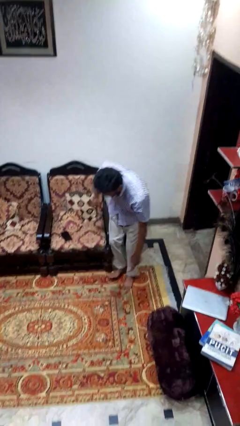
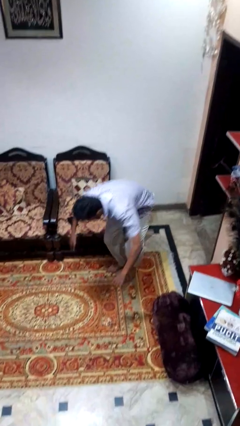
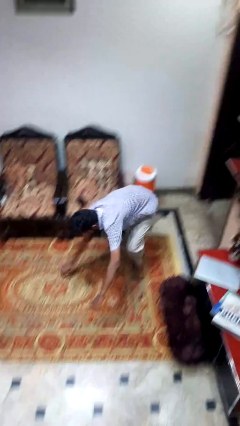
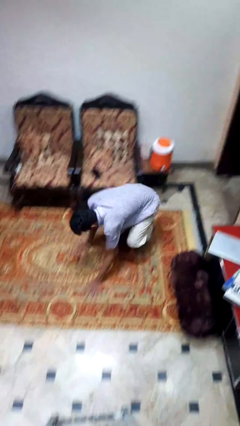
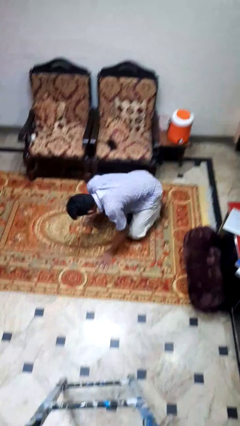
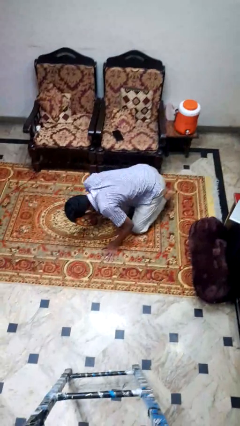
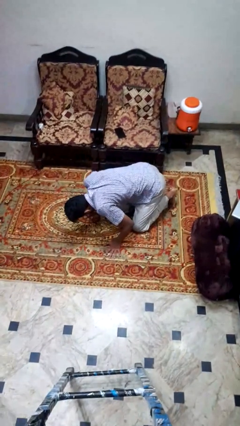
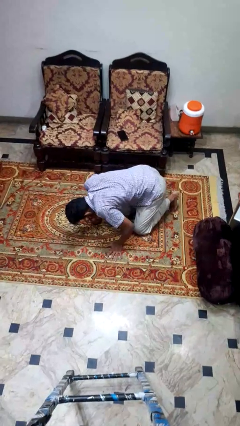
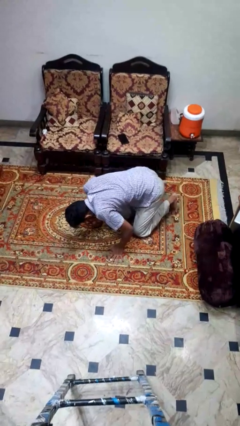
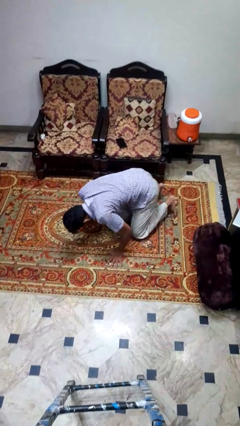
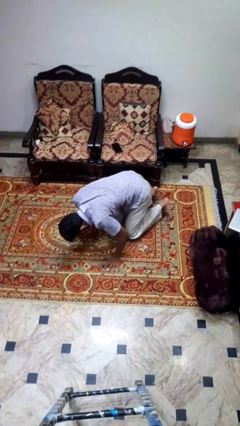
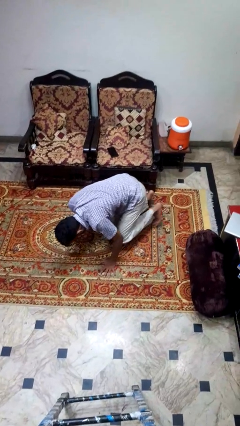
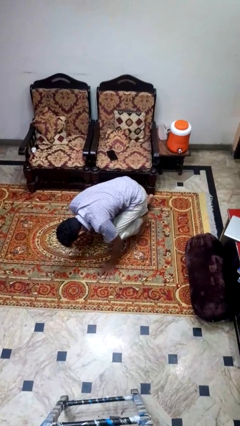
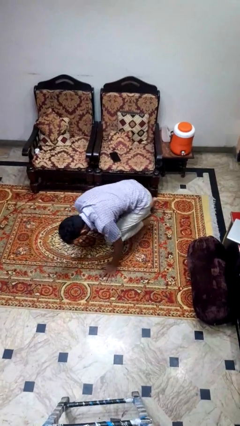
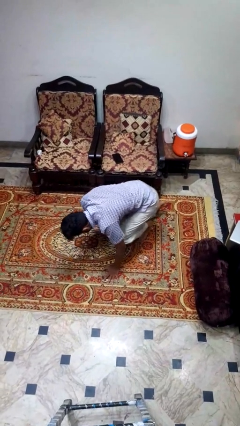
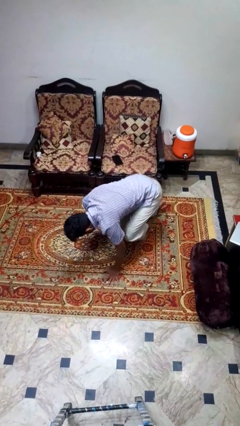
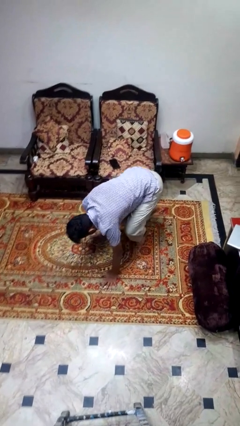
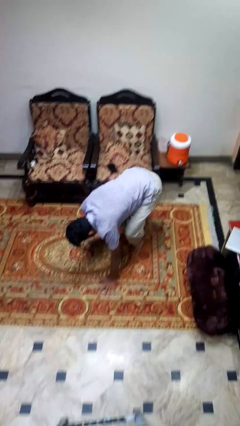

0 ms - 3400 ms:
person trips on object on floor

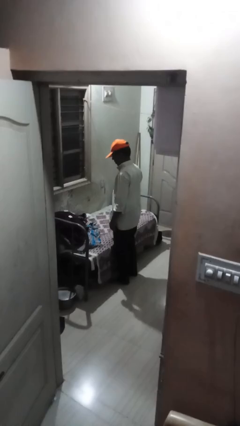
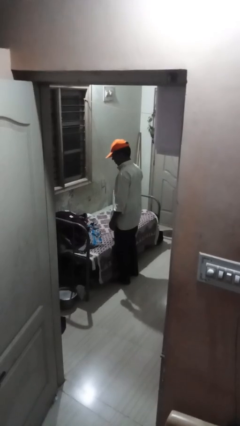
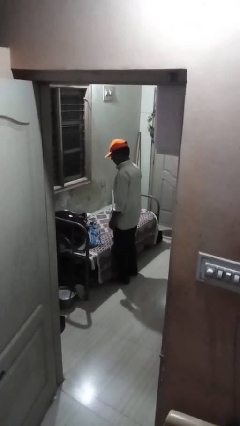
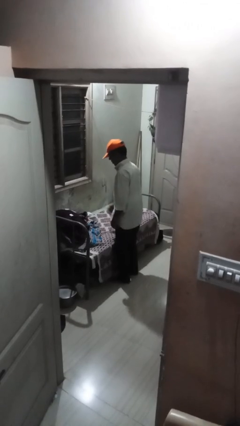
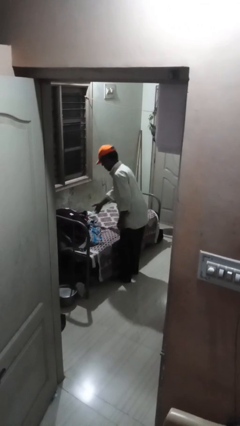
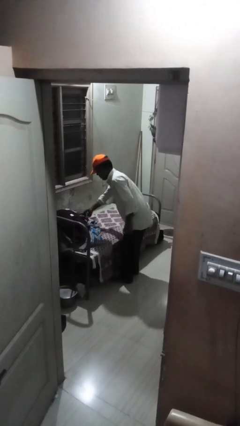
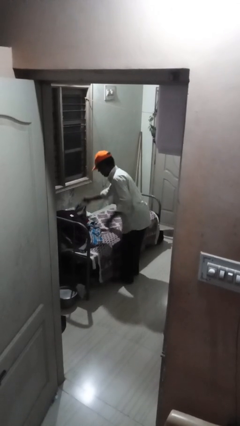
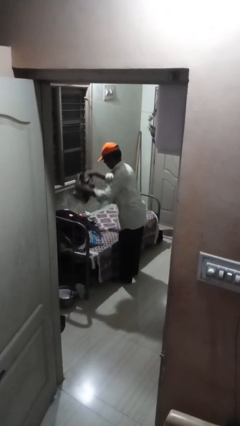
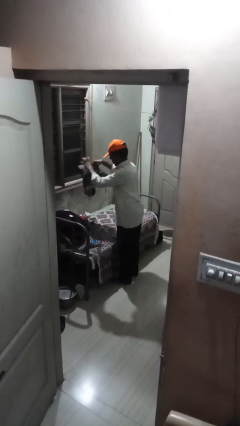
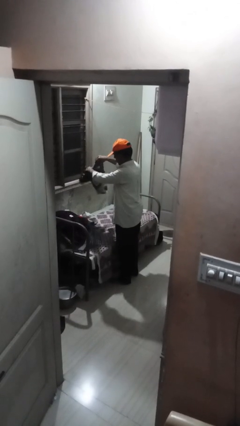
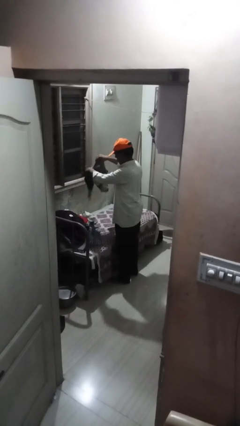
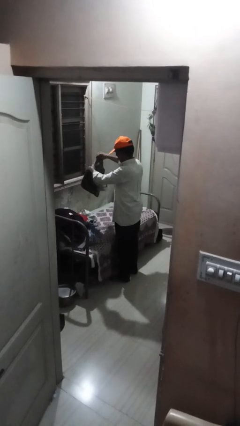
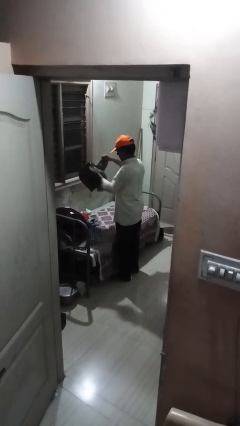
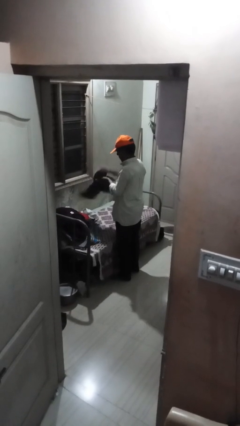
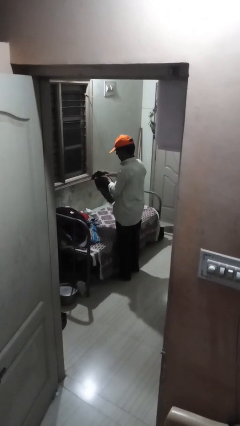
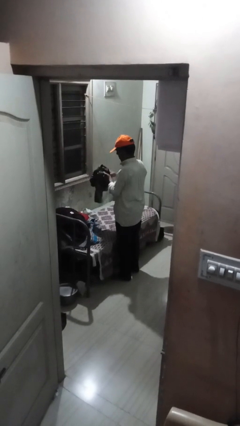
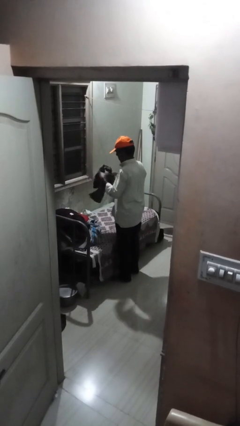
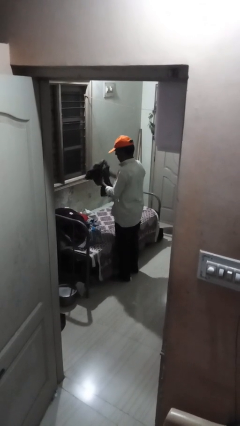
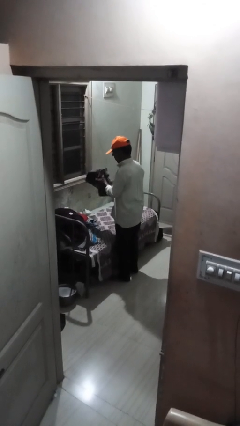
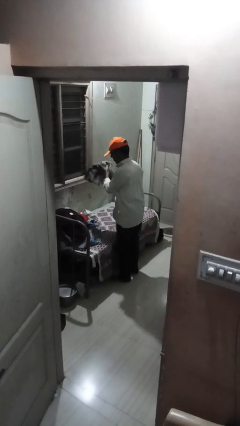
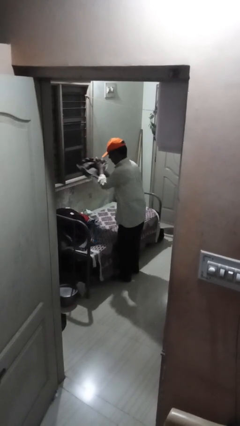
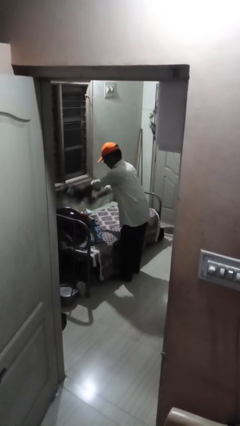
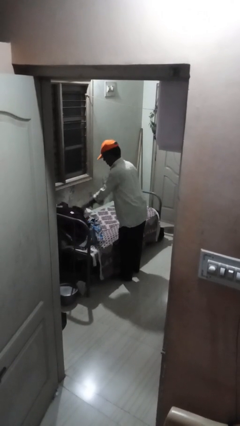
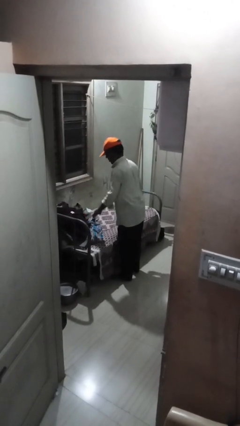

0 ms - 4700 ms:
person folds pants

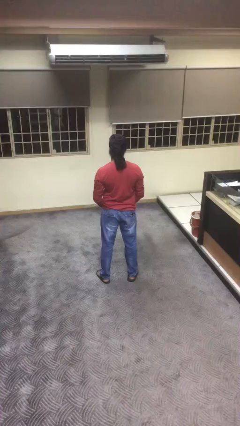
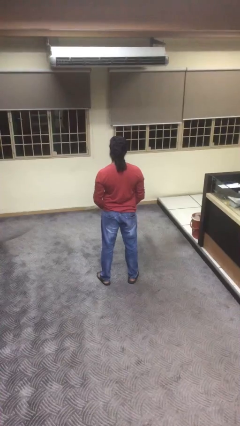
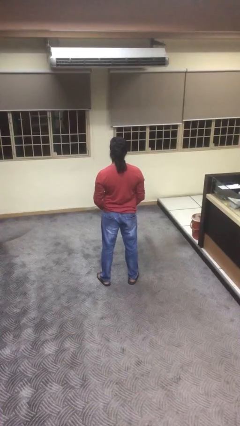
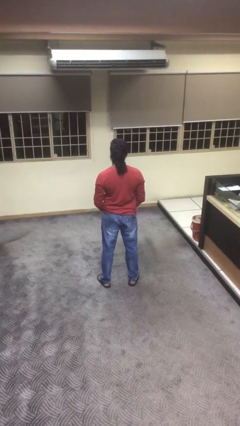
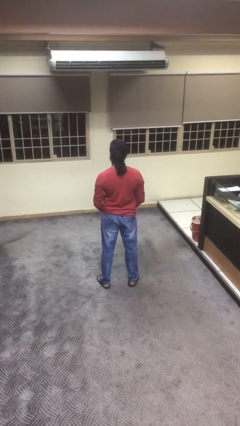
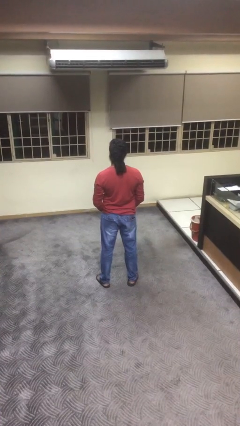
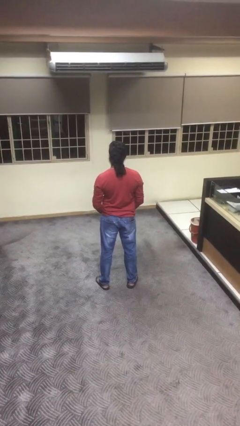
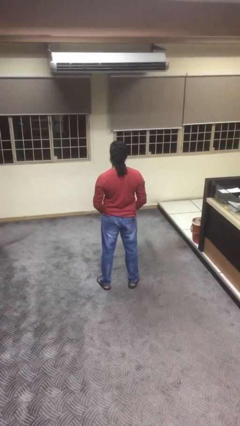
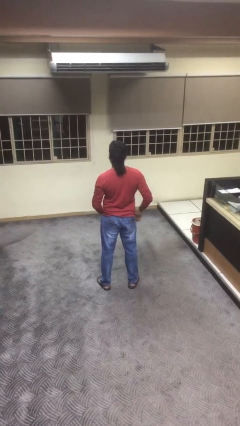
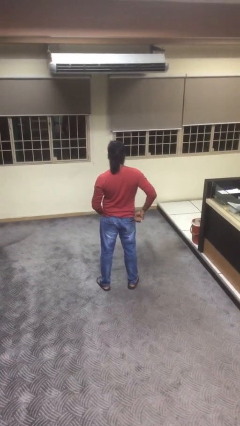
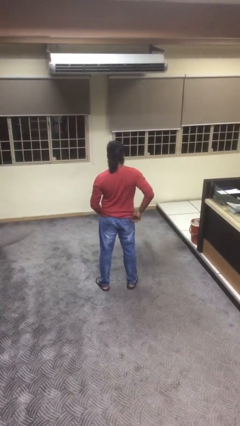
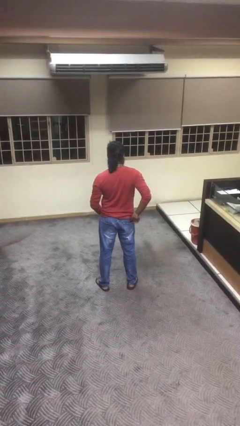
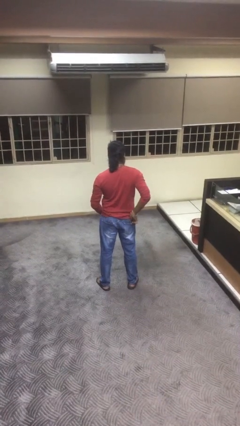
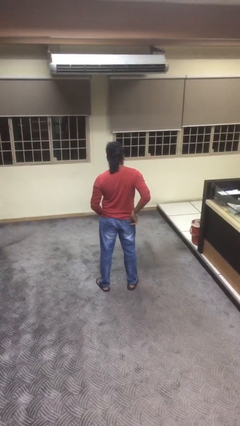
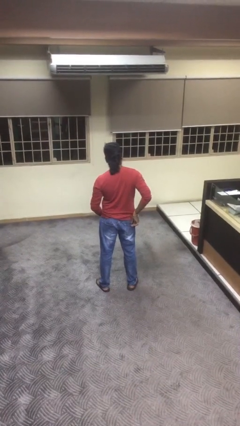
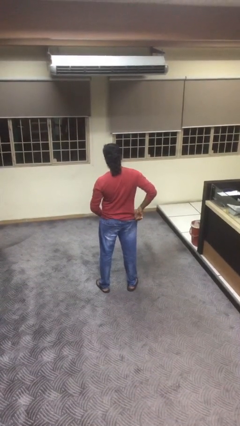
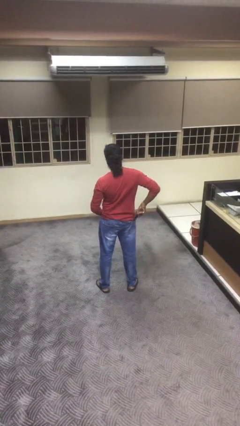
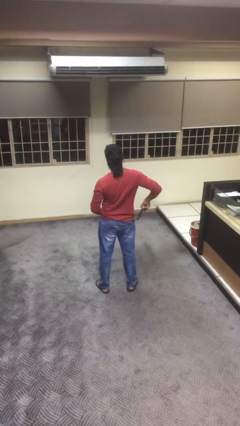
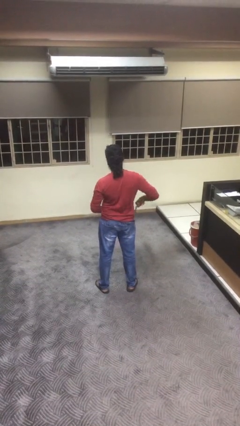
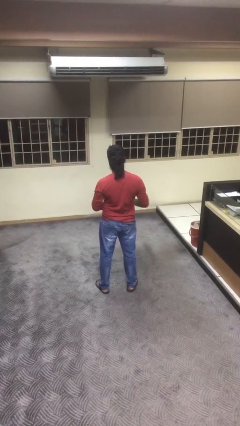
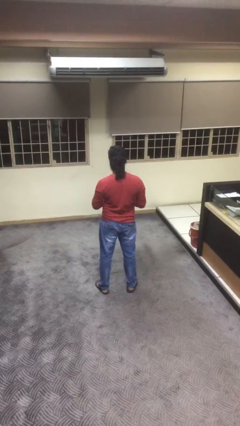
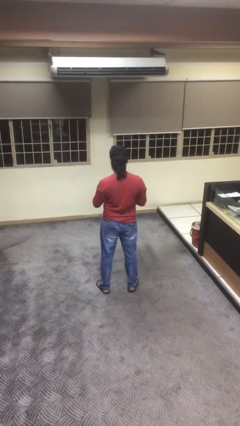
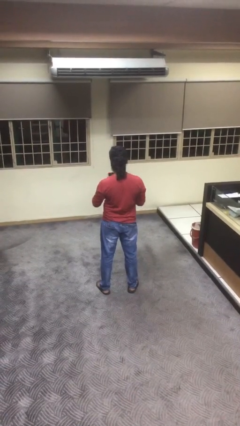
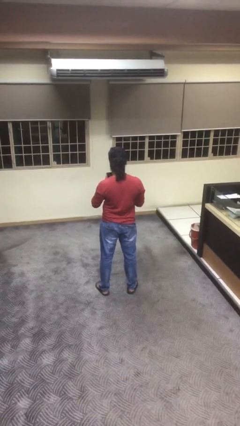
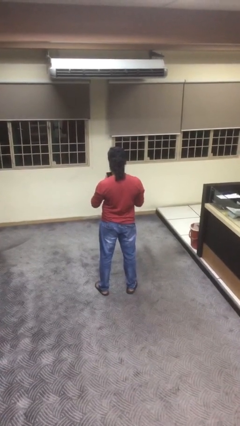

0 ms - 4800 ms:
person takes phone from pocket

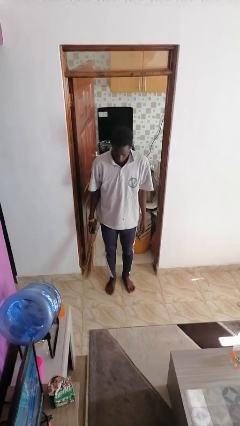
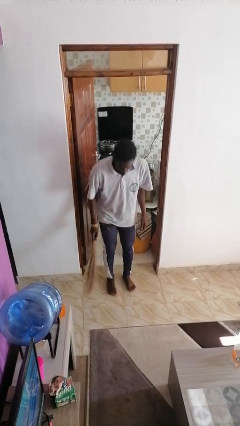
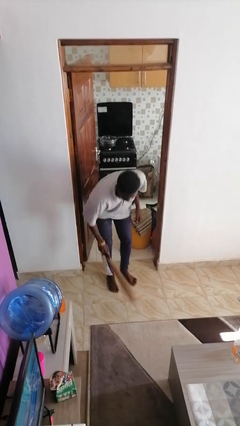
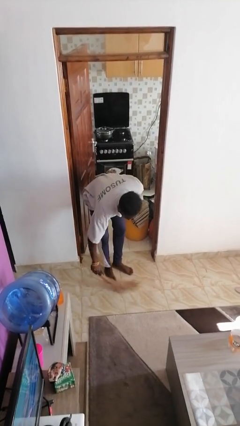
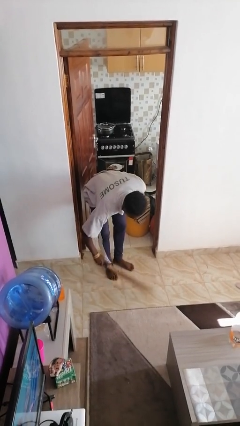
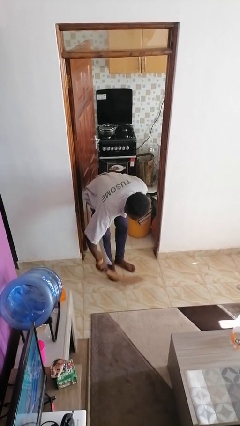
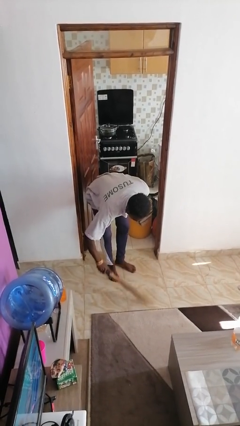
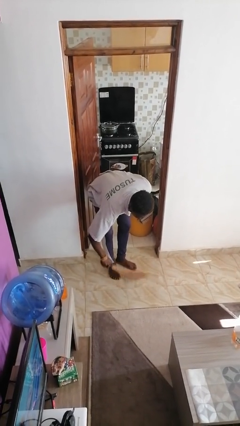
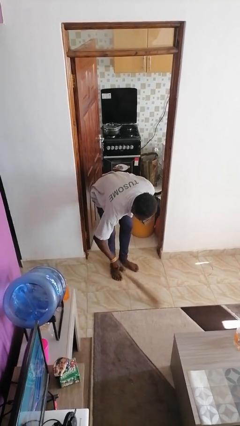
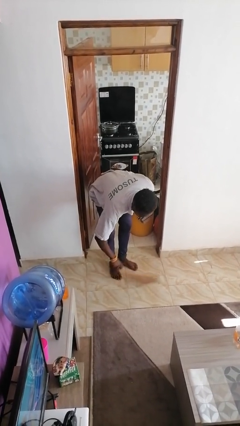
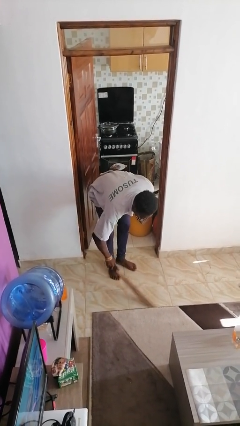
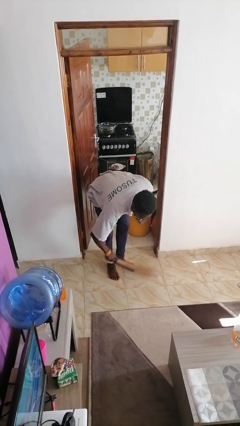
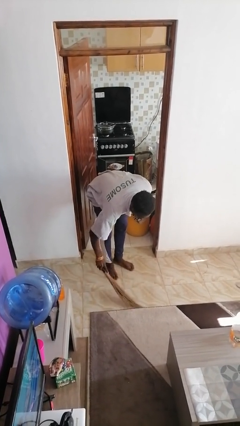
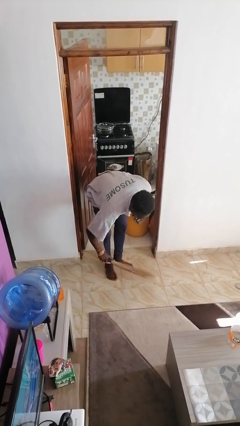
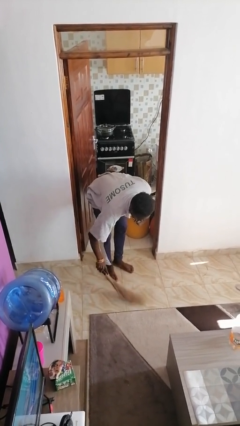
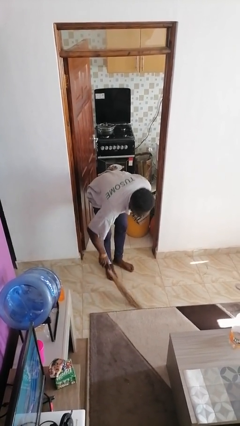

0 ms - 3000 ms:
person sweeps floor

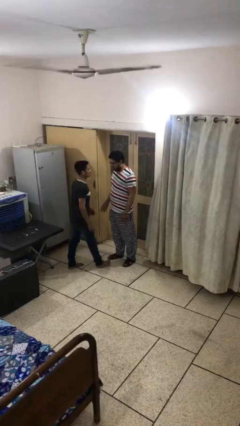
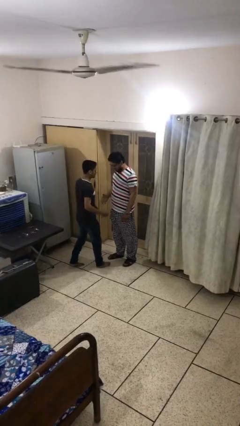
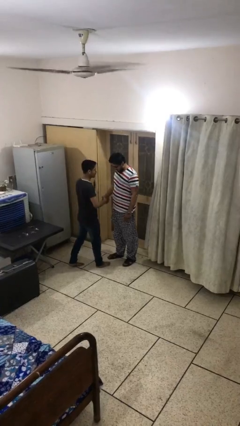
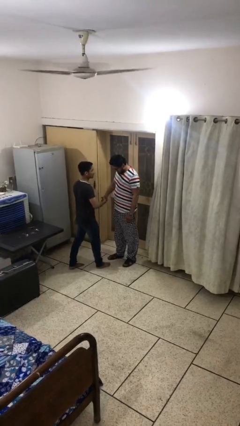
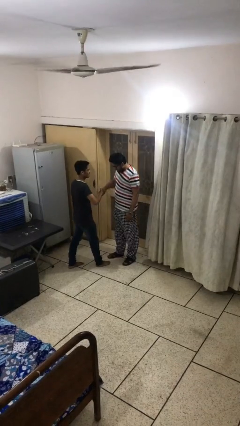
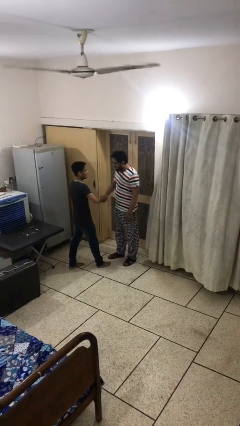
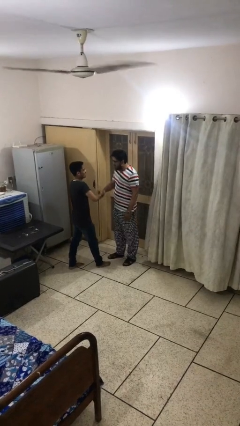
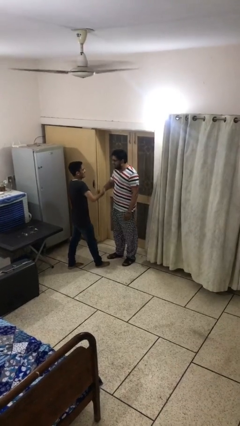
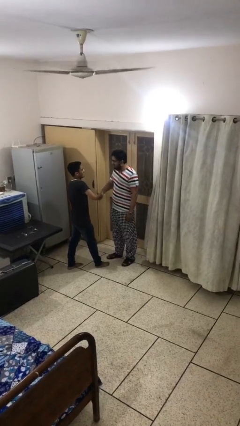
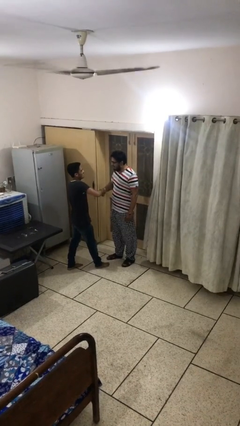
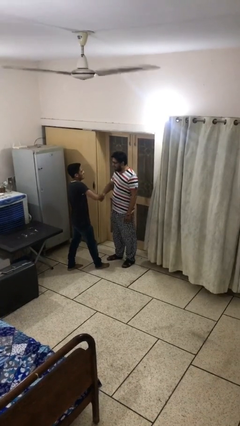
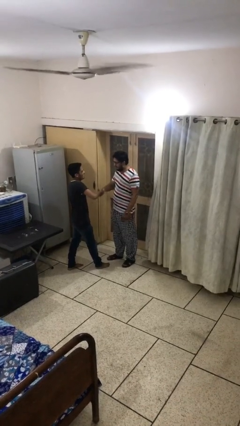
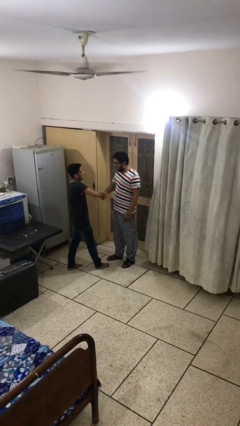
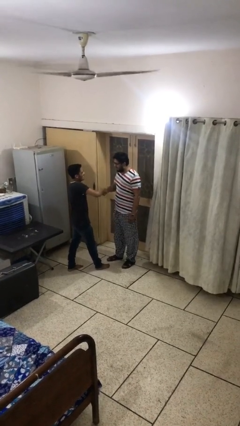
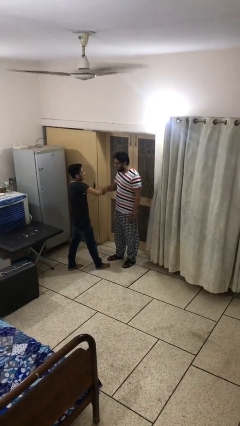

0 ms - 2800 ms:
person shakes hand
